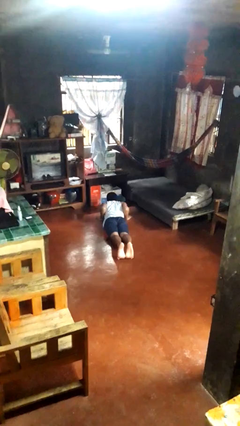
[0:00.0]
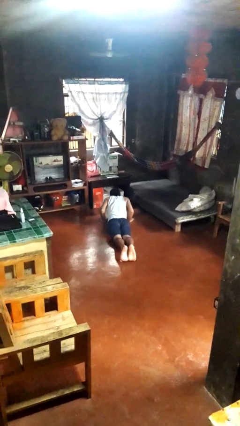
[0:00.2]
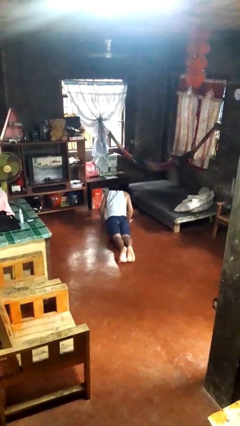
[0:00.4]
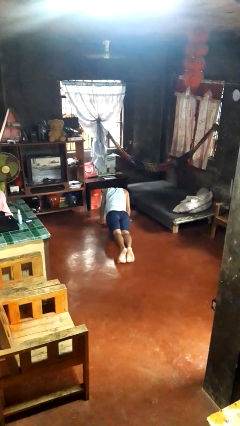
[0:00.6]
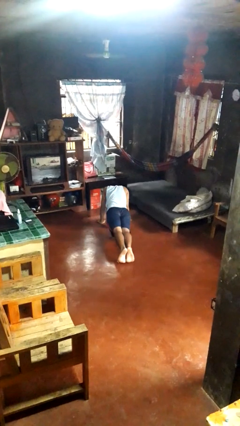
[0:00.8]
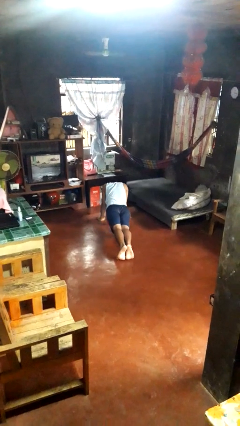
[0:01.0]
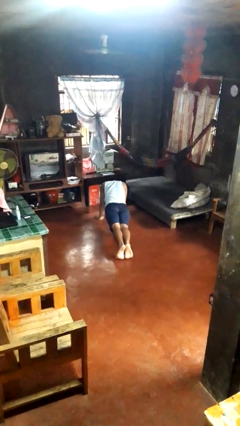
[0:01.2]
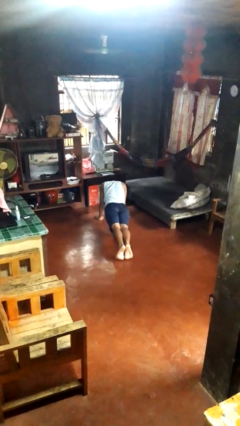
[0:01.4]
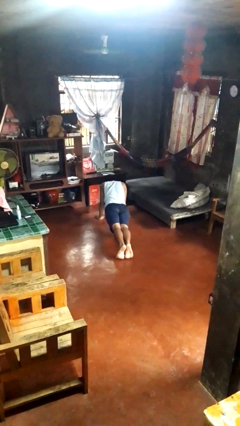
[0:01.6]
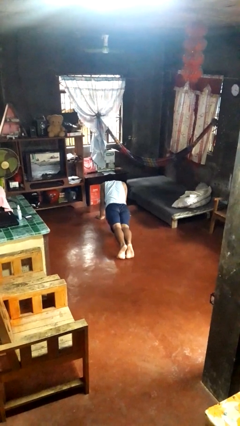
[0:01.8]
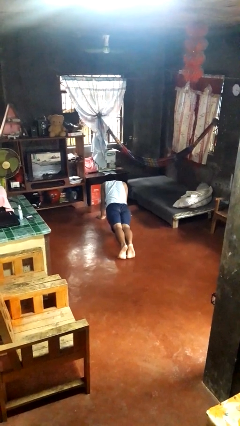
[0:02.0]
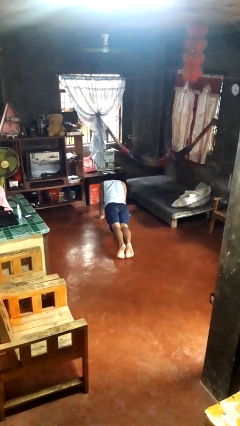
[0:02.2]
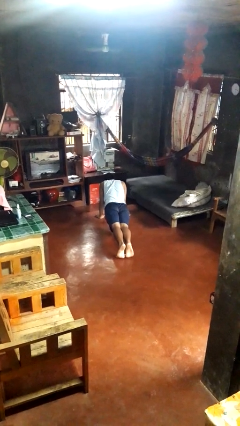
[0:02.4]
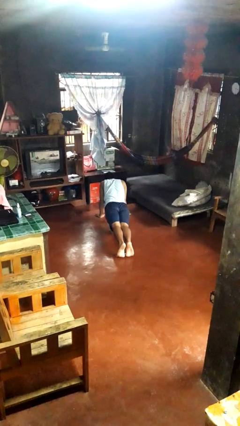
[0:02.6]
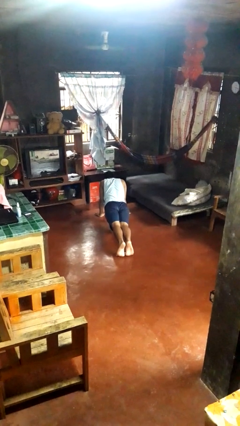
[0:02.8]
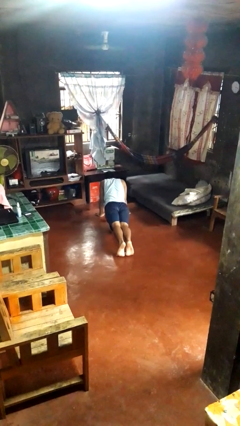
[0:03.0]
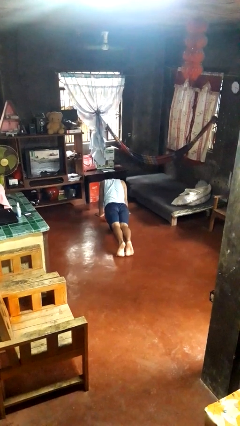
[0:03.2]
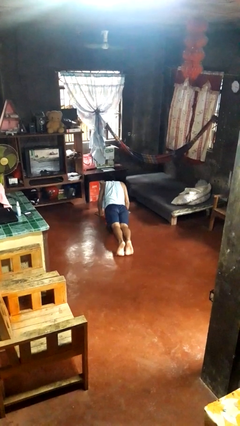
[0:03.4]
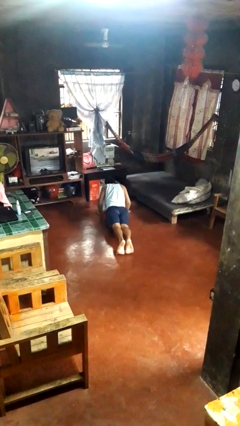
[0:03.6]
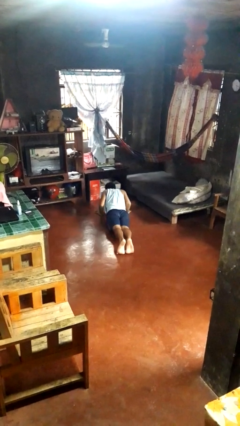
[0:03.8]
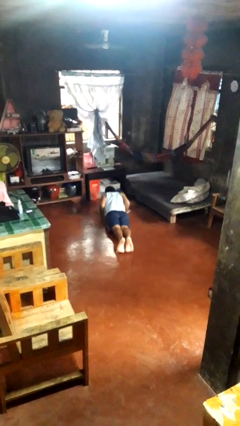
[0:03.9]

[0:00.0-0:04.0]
person exercises with pushup

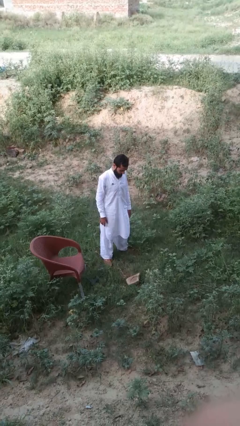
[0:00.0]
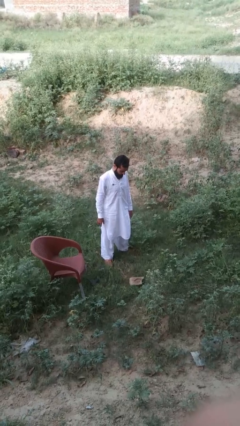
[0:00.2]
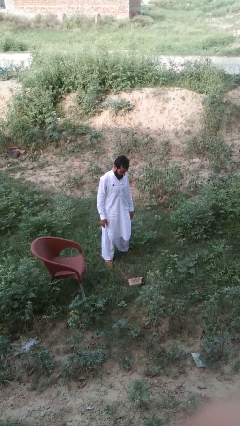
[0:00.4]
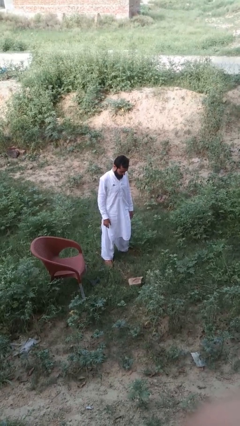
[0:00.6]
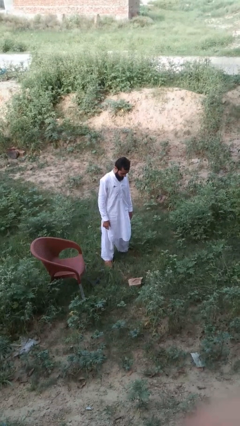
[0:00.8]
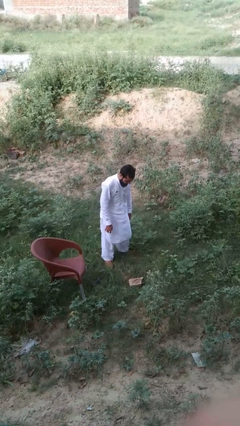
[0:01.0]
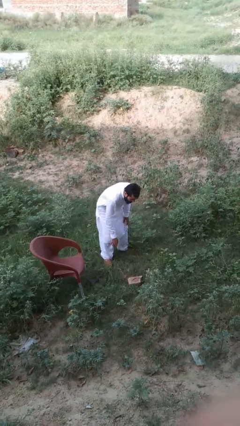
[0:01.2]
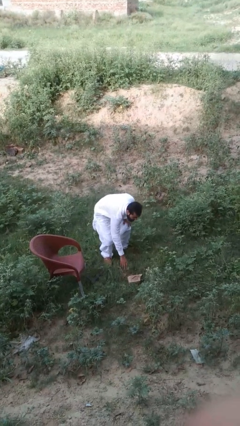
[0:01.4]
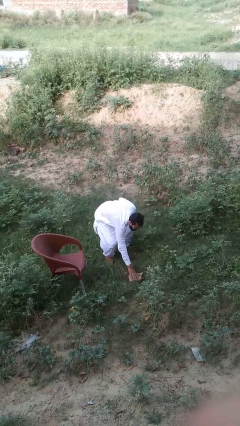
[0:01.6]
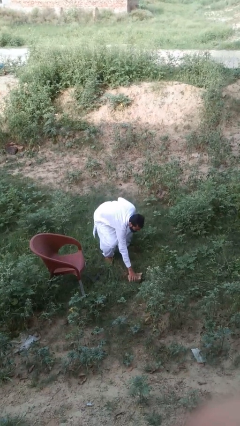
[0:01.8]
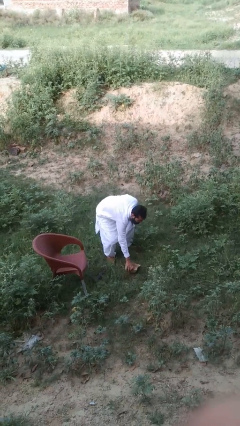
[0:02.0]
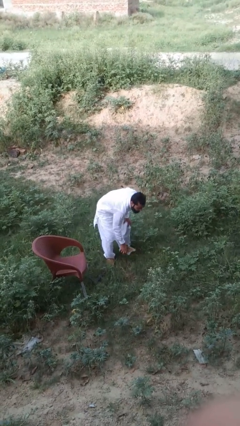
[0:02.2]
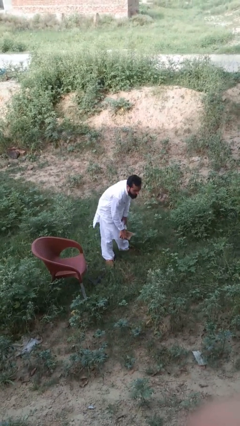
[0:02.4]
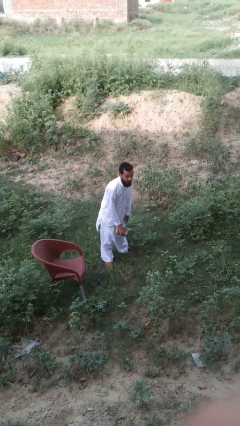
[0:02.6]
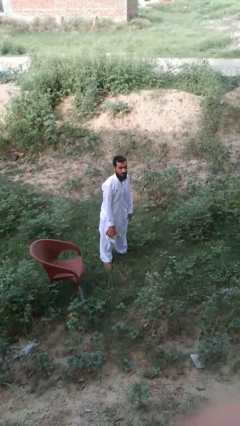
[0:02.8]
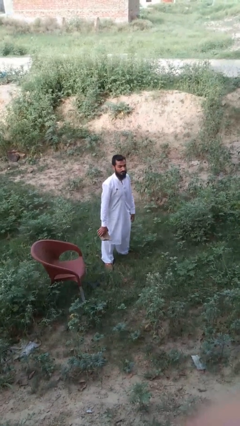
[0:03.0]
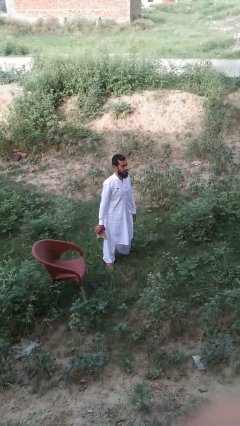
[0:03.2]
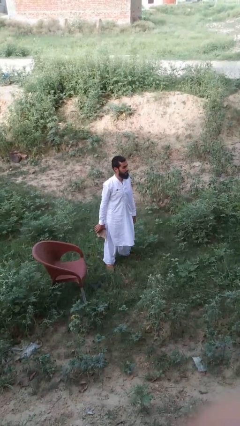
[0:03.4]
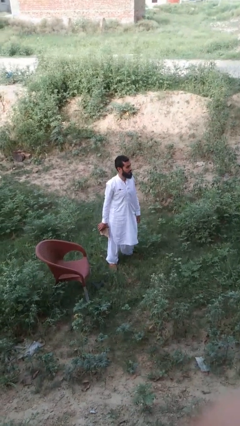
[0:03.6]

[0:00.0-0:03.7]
person picks up object from floor

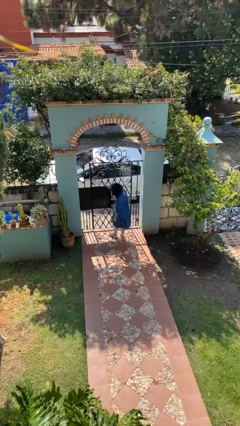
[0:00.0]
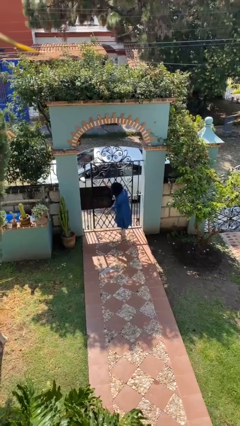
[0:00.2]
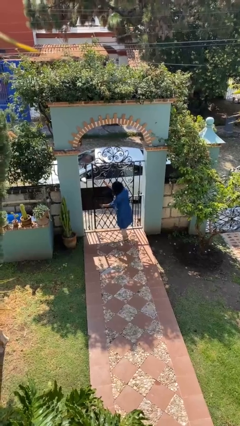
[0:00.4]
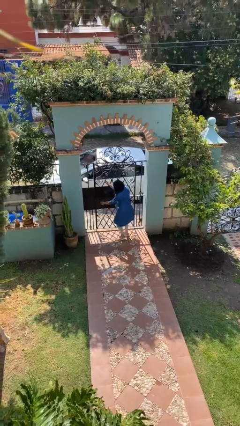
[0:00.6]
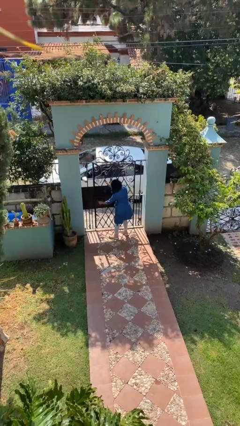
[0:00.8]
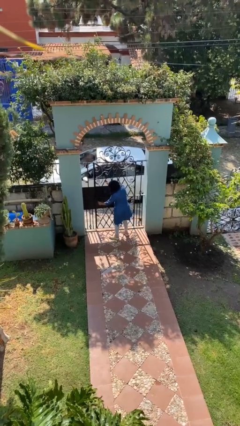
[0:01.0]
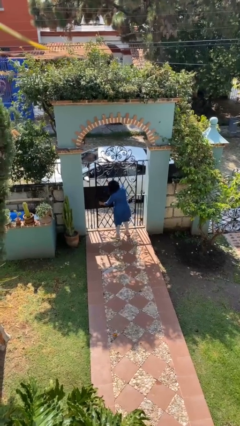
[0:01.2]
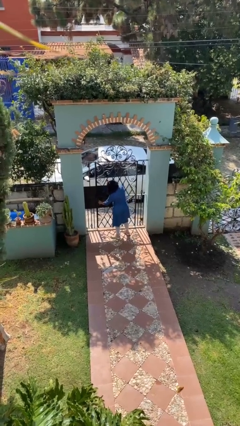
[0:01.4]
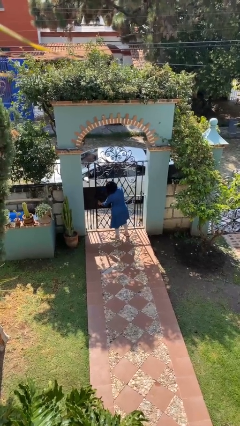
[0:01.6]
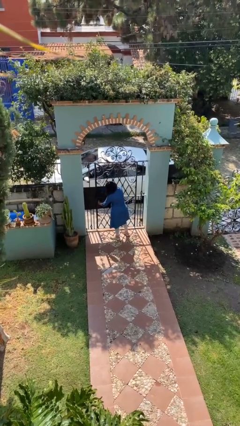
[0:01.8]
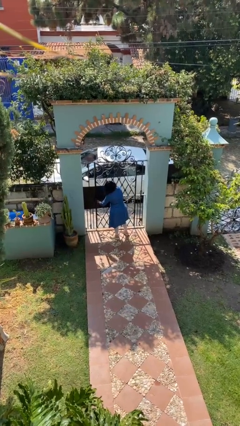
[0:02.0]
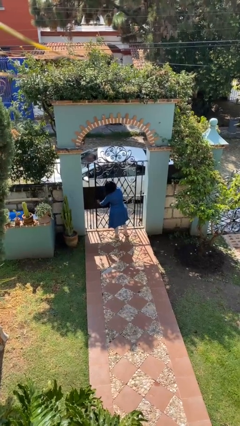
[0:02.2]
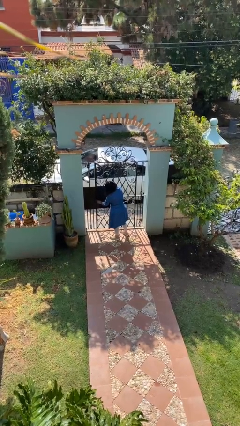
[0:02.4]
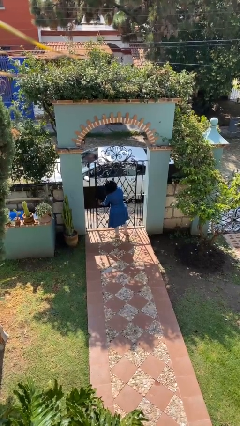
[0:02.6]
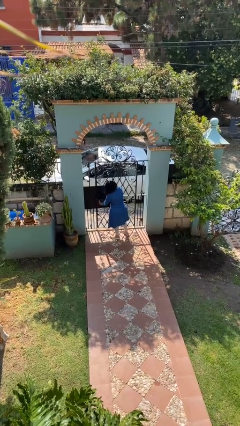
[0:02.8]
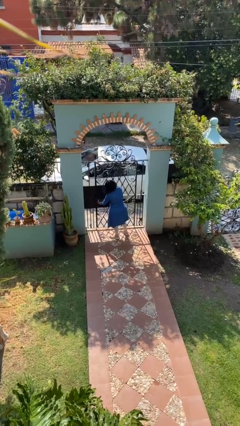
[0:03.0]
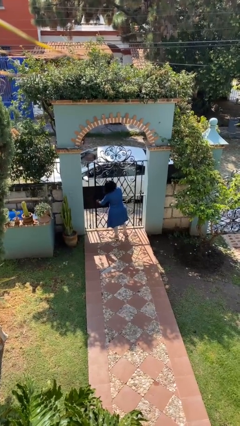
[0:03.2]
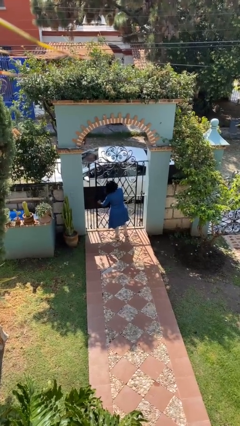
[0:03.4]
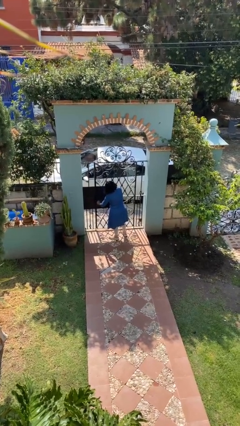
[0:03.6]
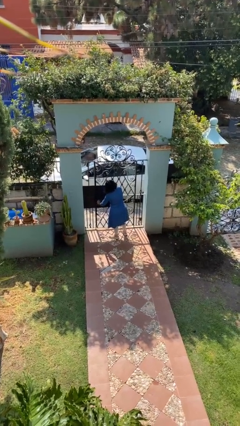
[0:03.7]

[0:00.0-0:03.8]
person unlocks door with keys

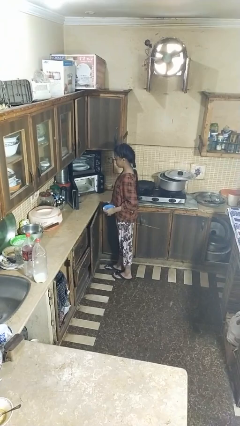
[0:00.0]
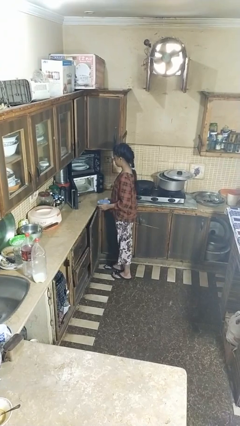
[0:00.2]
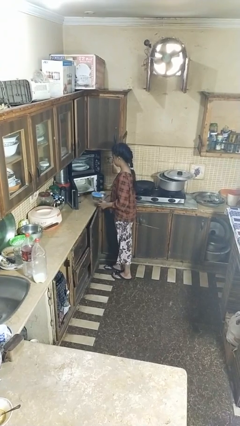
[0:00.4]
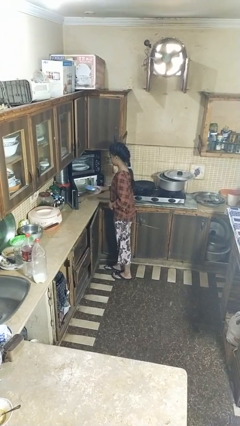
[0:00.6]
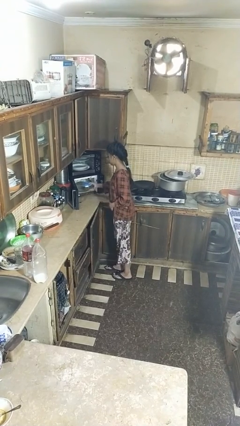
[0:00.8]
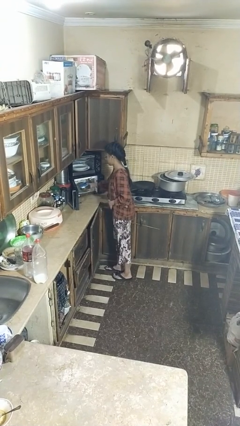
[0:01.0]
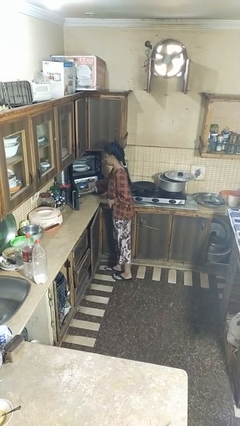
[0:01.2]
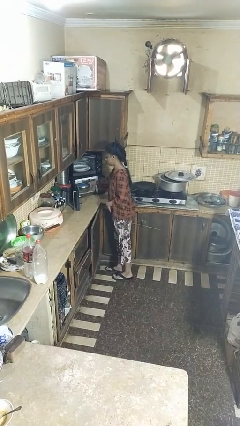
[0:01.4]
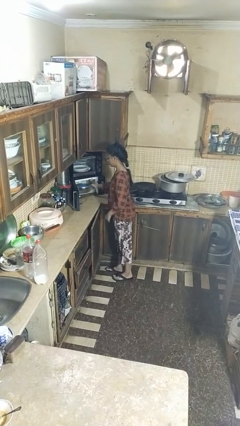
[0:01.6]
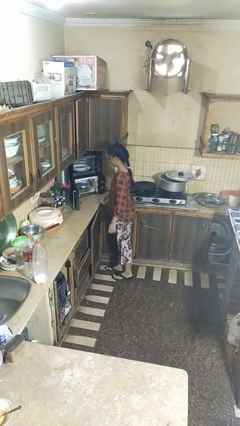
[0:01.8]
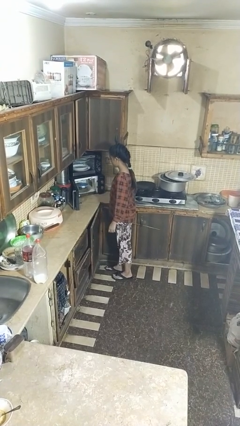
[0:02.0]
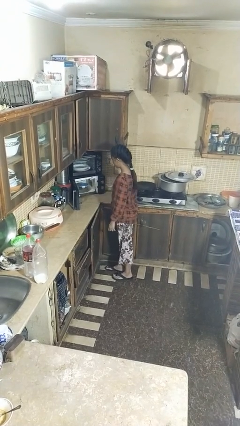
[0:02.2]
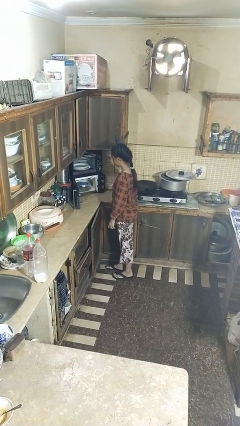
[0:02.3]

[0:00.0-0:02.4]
person puts object into microwave

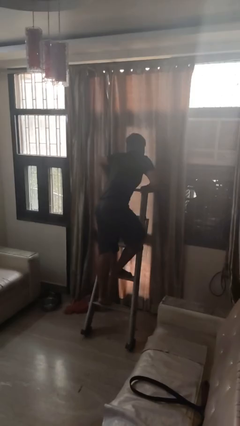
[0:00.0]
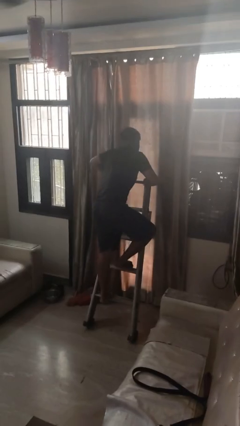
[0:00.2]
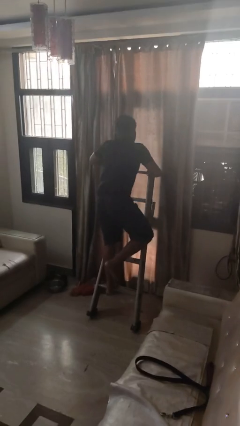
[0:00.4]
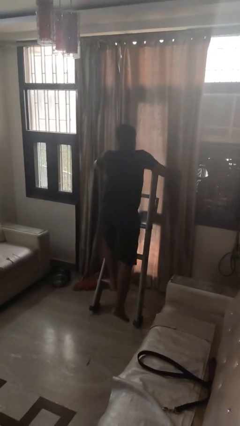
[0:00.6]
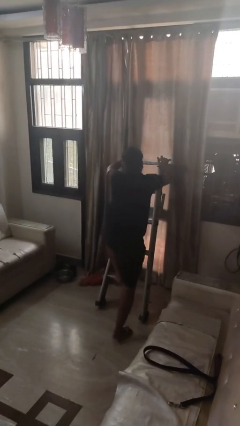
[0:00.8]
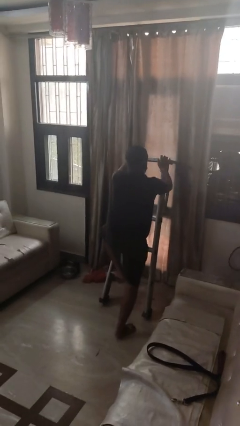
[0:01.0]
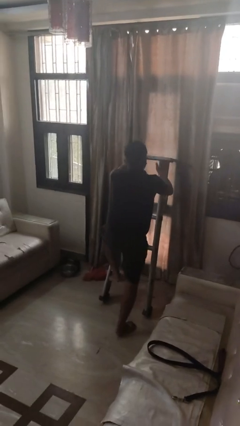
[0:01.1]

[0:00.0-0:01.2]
person climbs down ladder

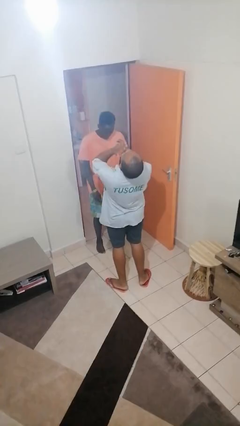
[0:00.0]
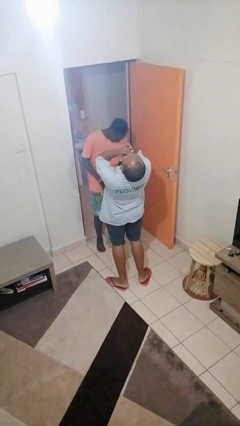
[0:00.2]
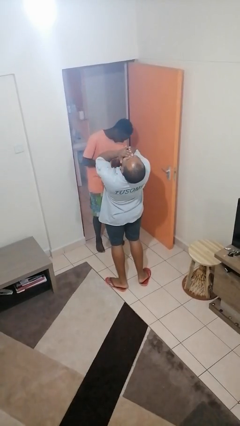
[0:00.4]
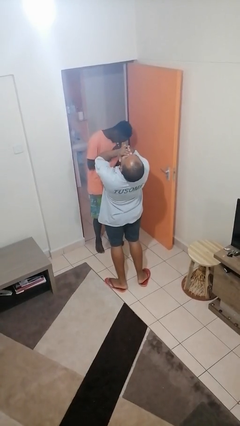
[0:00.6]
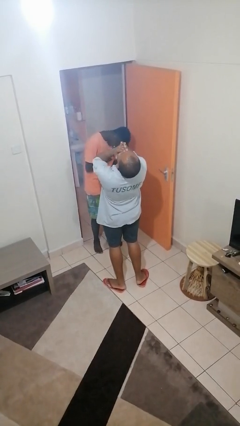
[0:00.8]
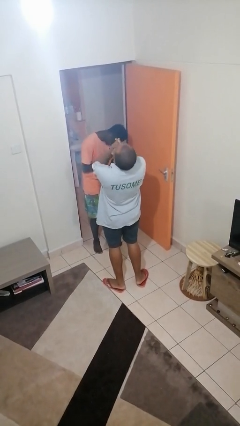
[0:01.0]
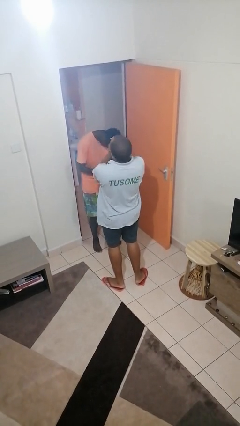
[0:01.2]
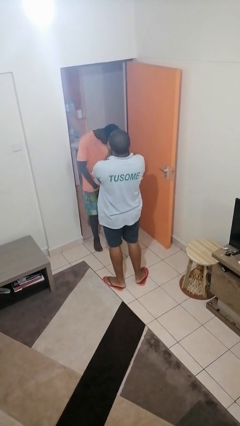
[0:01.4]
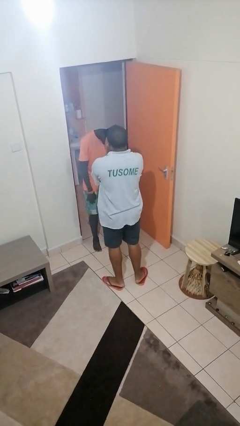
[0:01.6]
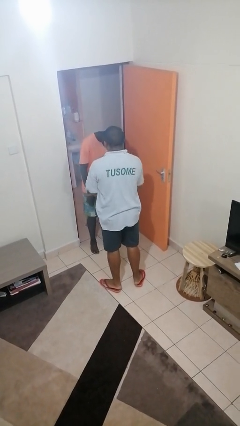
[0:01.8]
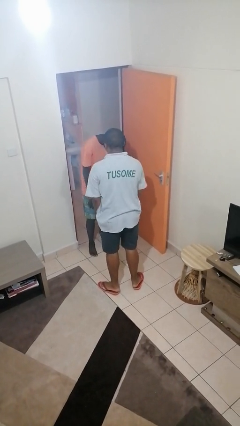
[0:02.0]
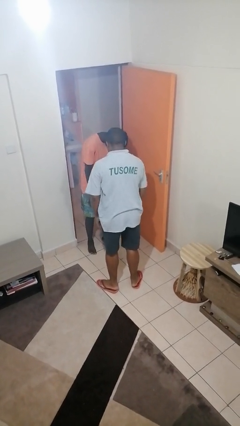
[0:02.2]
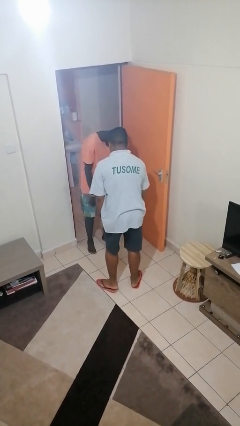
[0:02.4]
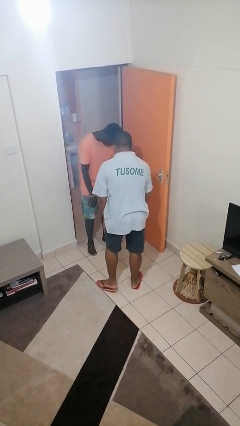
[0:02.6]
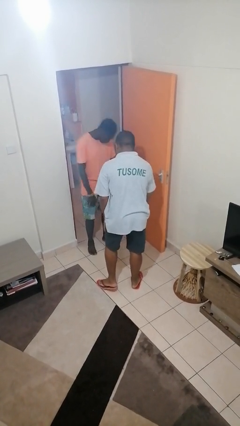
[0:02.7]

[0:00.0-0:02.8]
person laughs with person
